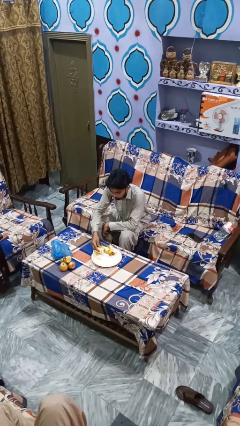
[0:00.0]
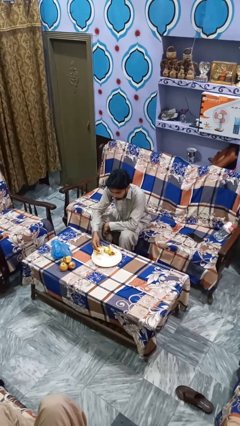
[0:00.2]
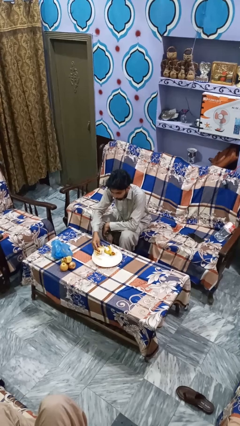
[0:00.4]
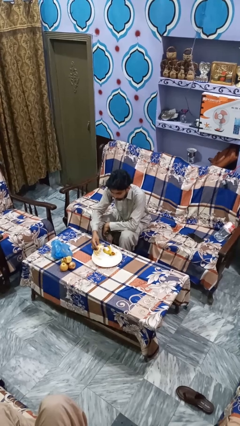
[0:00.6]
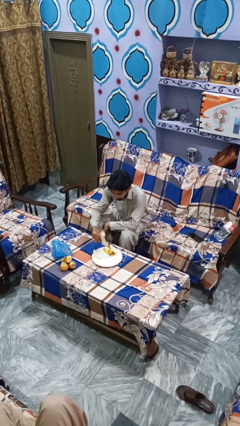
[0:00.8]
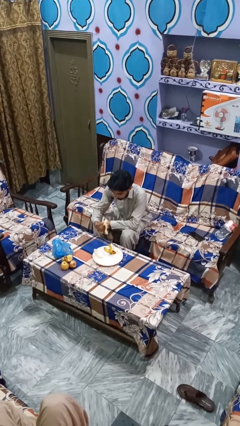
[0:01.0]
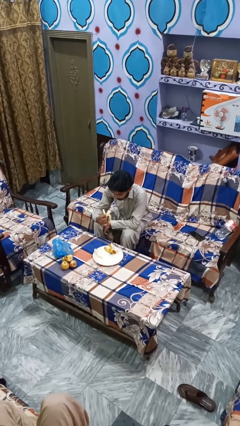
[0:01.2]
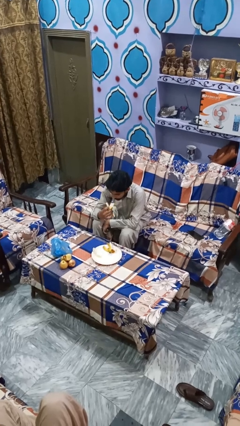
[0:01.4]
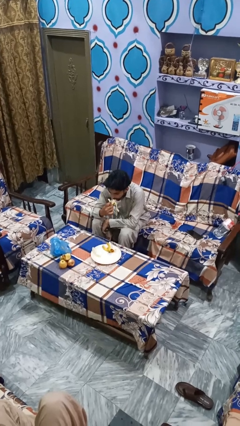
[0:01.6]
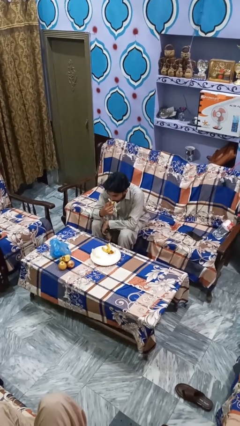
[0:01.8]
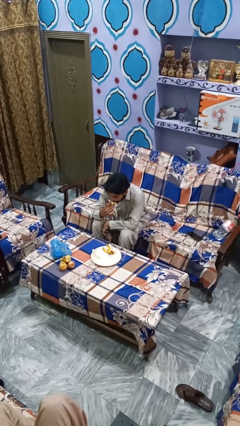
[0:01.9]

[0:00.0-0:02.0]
person eats banana

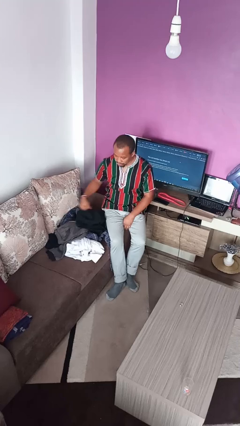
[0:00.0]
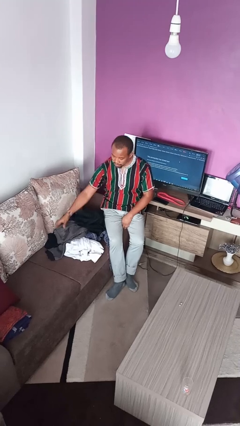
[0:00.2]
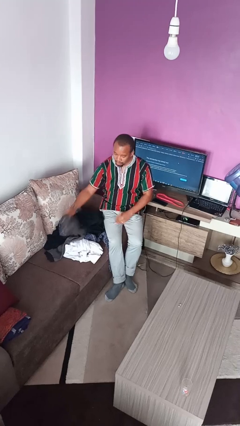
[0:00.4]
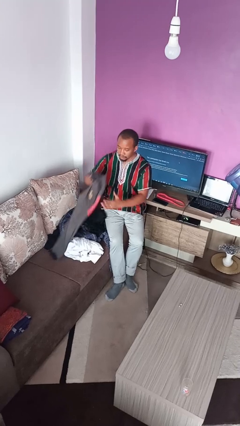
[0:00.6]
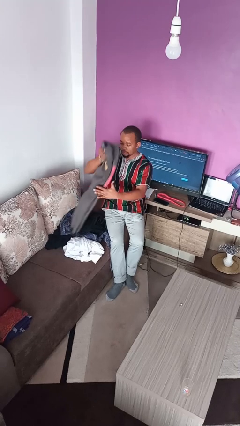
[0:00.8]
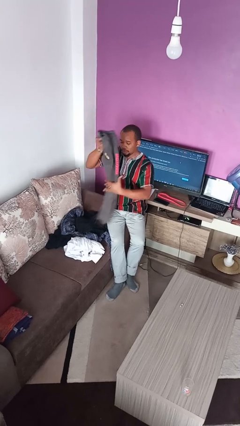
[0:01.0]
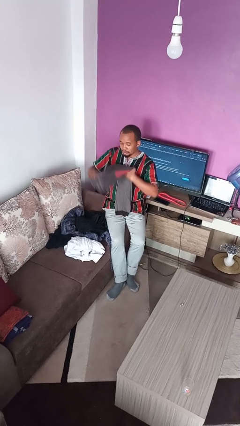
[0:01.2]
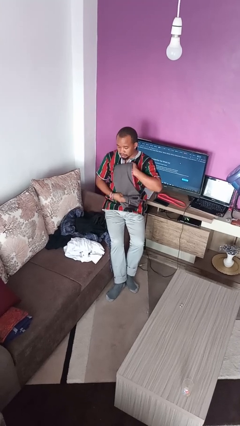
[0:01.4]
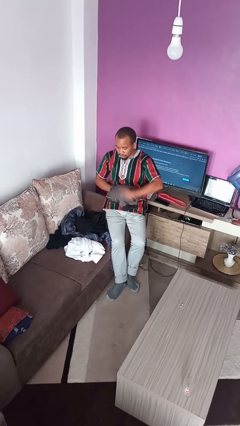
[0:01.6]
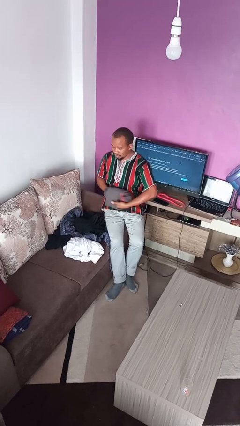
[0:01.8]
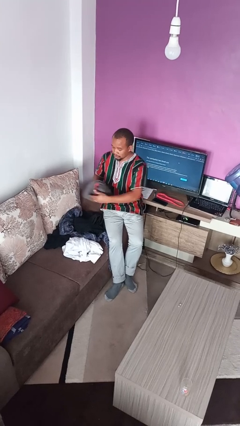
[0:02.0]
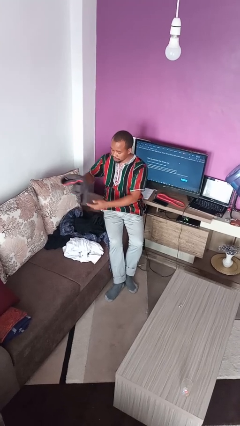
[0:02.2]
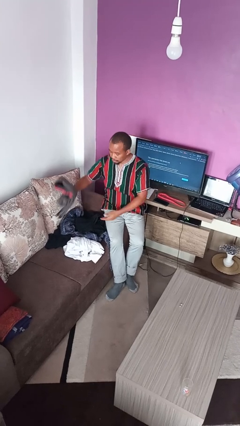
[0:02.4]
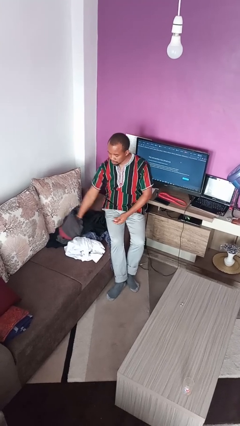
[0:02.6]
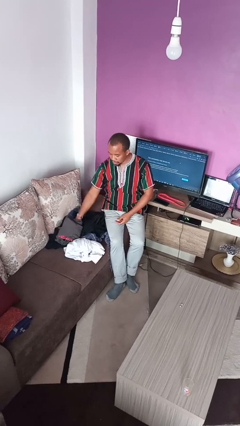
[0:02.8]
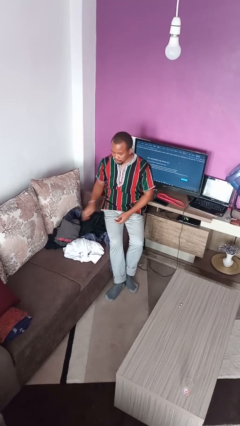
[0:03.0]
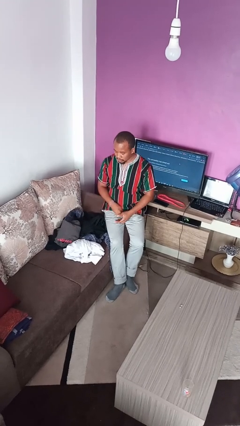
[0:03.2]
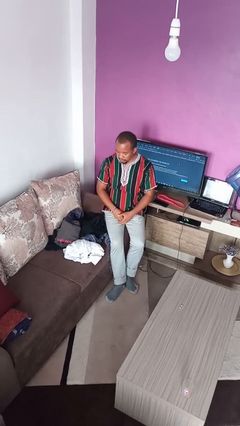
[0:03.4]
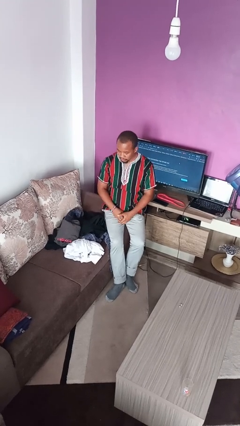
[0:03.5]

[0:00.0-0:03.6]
person folds pants

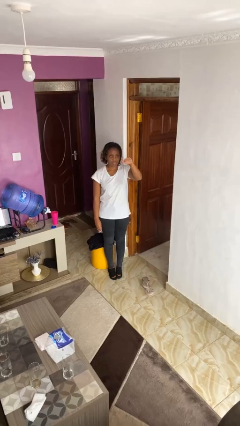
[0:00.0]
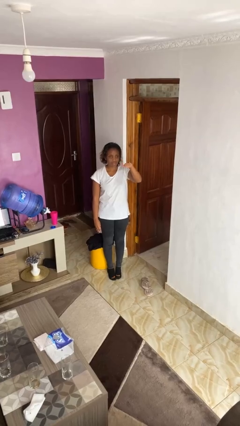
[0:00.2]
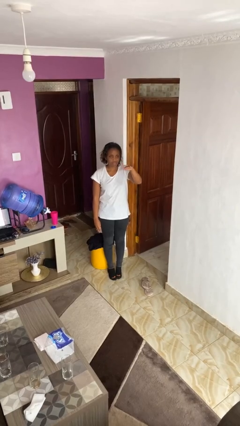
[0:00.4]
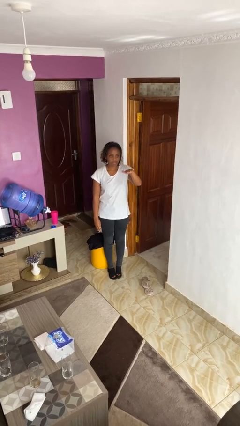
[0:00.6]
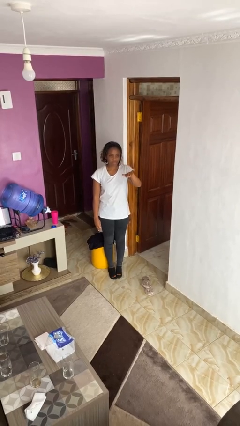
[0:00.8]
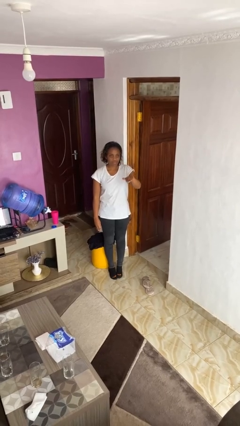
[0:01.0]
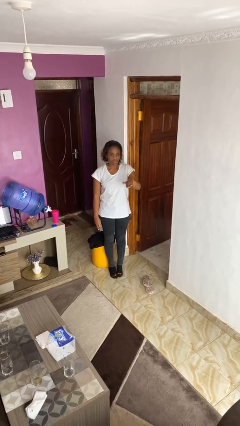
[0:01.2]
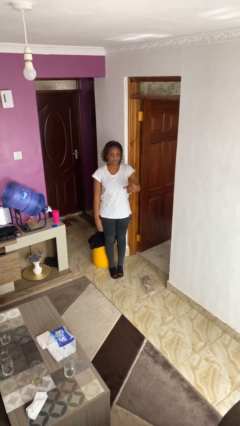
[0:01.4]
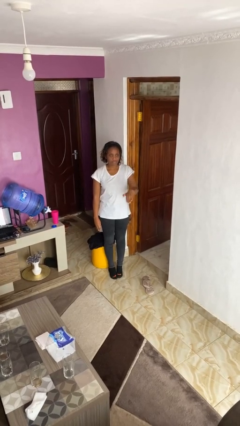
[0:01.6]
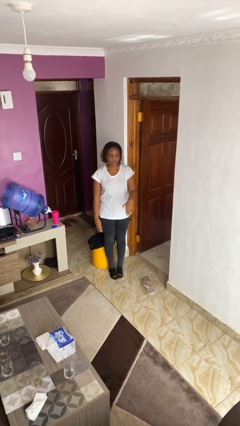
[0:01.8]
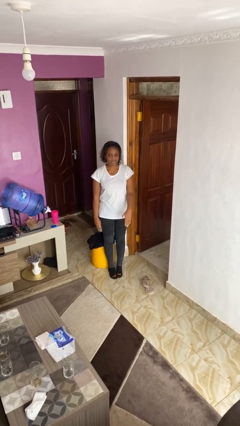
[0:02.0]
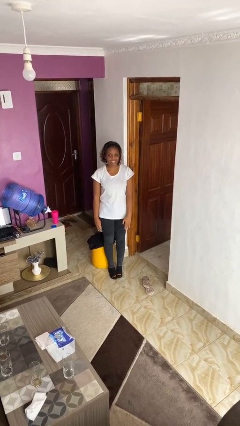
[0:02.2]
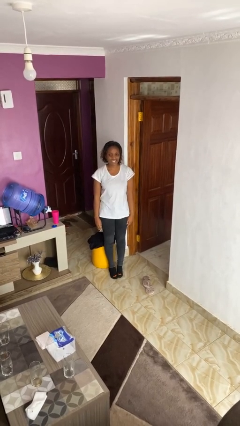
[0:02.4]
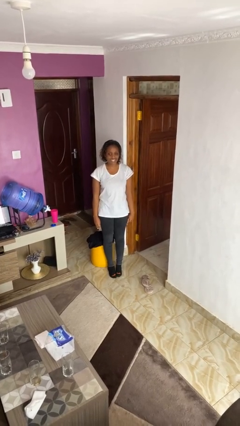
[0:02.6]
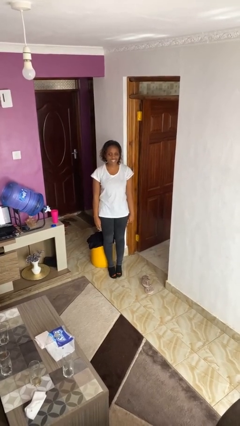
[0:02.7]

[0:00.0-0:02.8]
person gestures swipe down

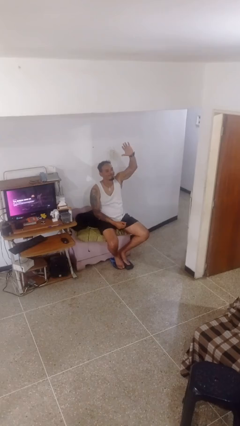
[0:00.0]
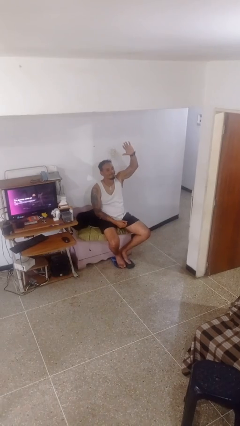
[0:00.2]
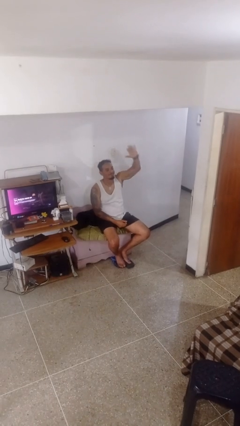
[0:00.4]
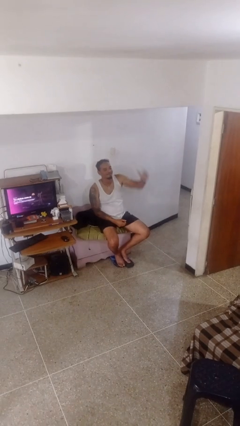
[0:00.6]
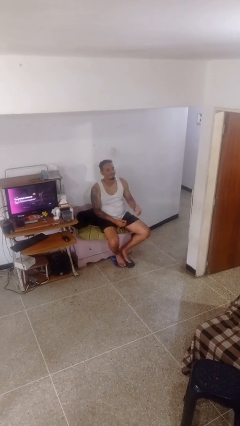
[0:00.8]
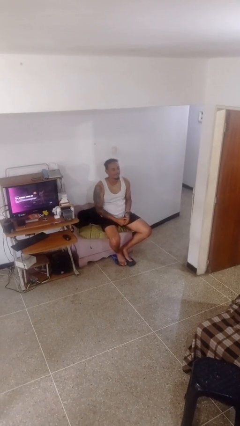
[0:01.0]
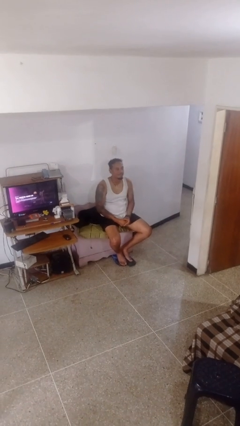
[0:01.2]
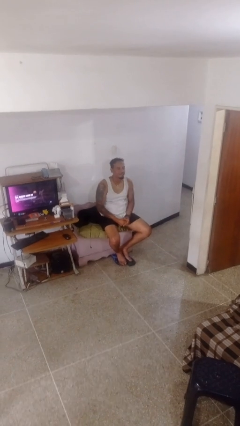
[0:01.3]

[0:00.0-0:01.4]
person gestures lower hand

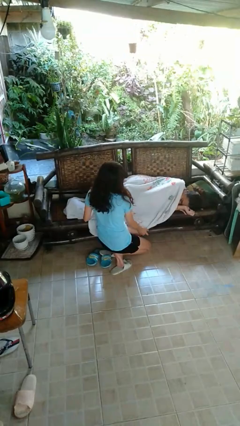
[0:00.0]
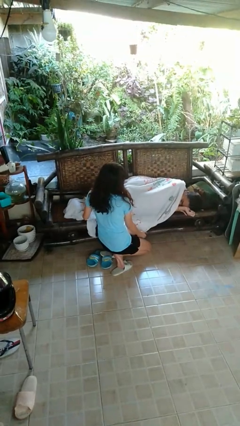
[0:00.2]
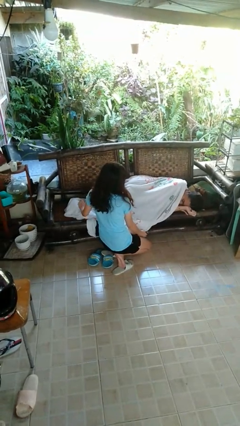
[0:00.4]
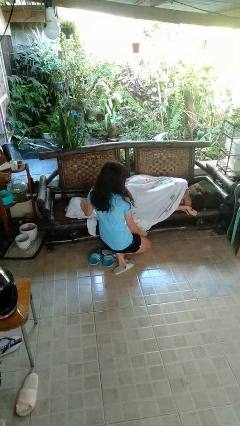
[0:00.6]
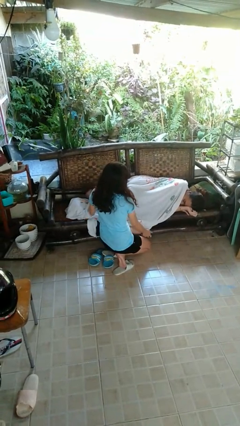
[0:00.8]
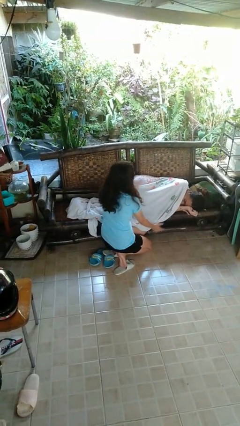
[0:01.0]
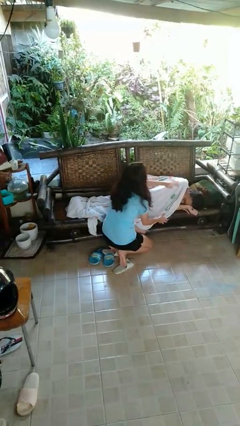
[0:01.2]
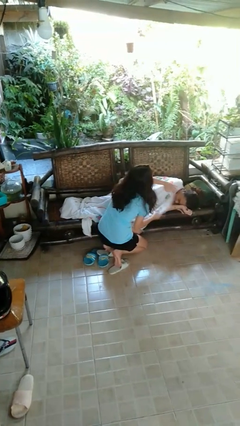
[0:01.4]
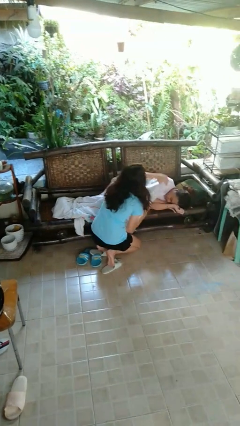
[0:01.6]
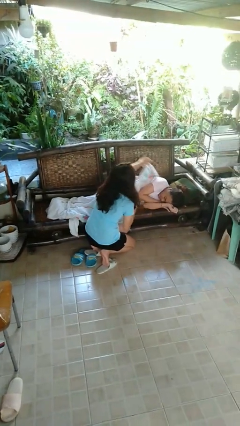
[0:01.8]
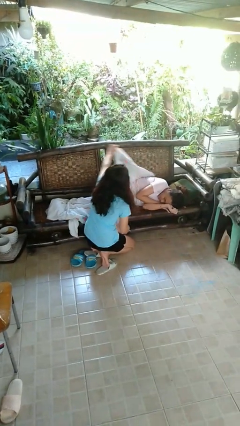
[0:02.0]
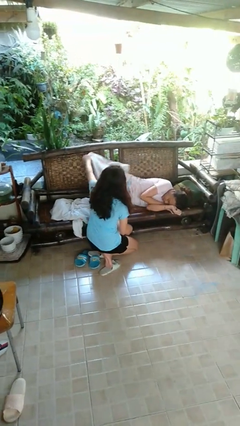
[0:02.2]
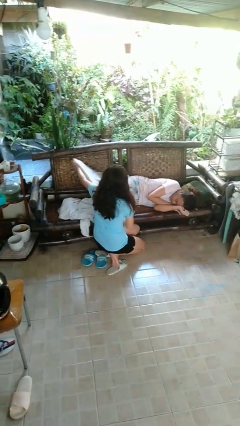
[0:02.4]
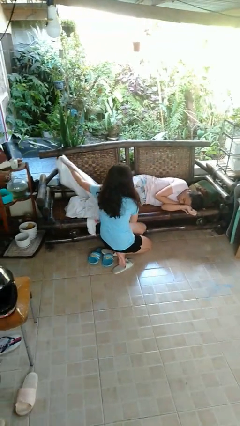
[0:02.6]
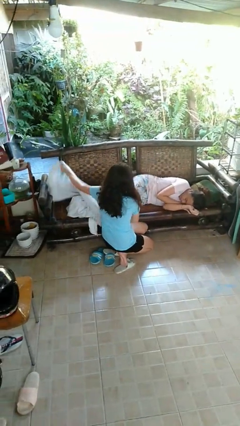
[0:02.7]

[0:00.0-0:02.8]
person uncovers friend with blanket

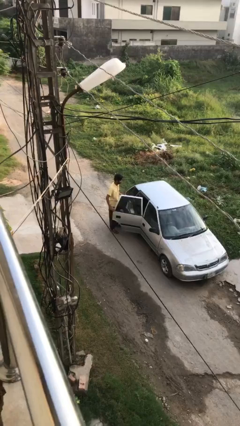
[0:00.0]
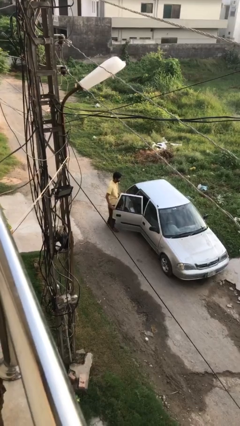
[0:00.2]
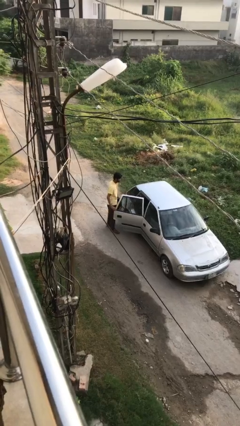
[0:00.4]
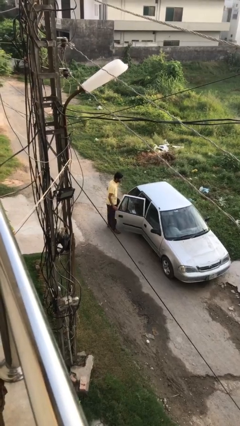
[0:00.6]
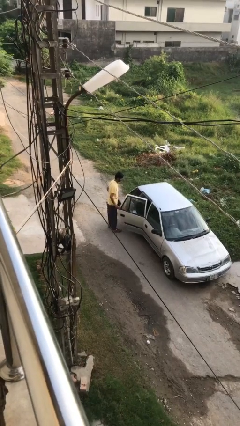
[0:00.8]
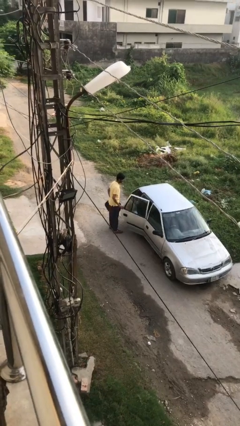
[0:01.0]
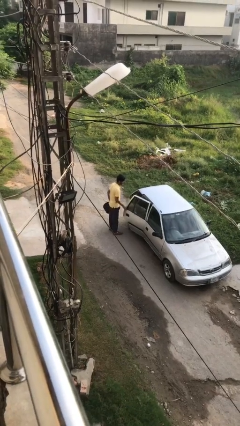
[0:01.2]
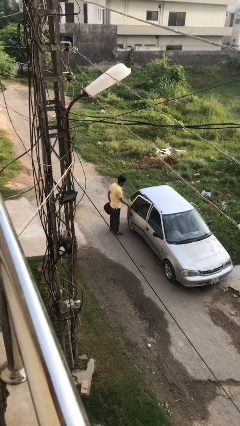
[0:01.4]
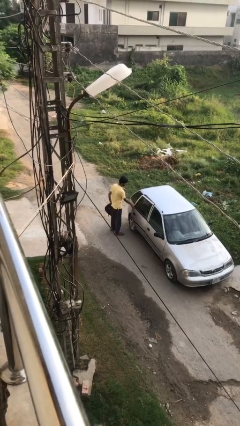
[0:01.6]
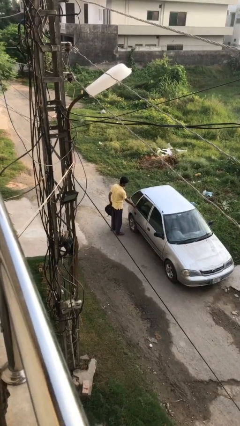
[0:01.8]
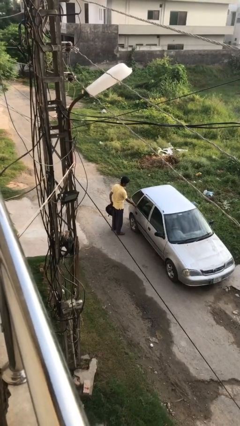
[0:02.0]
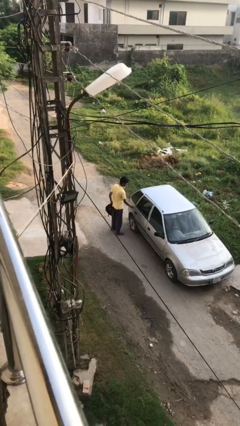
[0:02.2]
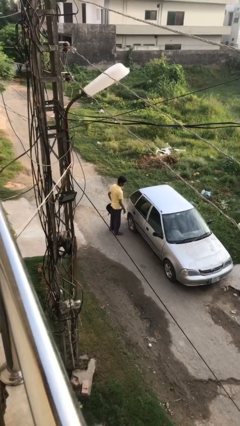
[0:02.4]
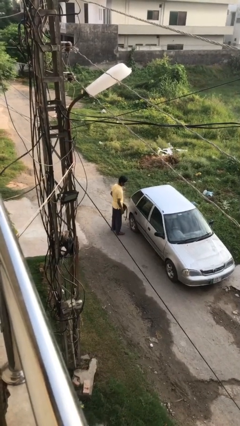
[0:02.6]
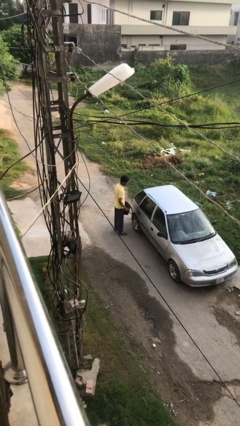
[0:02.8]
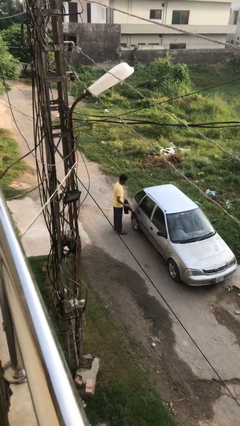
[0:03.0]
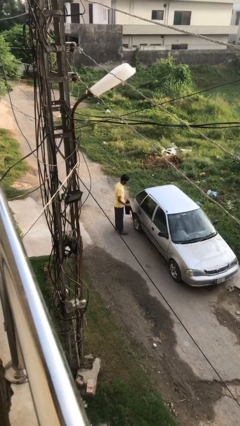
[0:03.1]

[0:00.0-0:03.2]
person closes car door

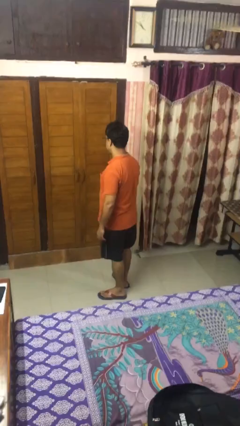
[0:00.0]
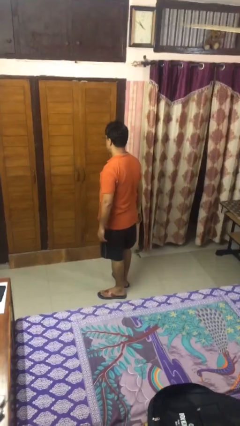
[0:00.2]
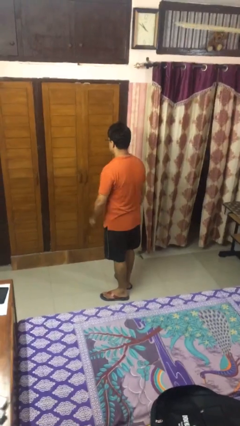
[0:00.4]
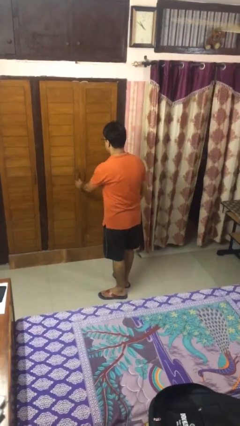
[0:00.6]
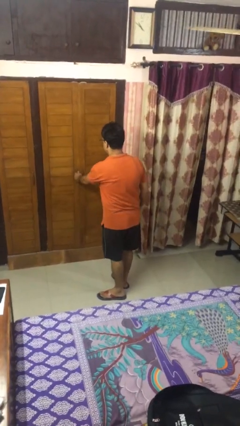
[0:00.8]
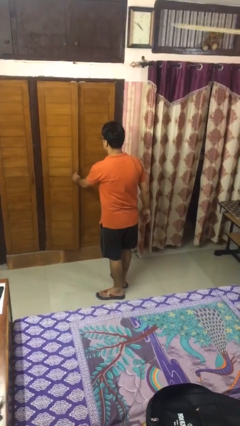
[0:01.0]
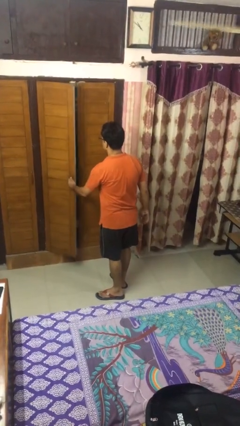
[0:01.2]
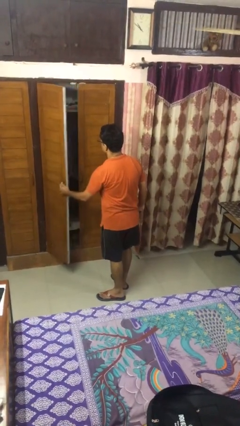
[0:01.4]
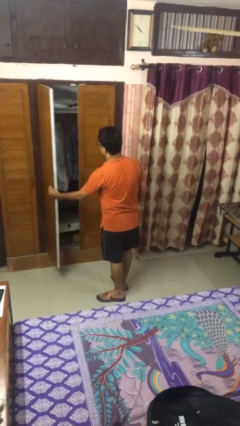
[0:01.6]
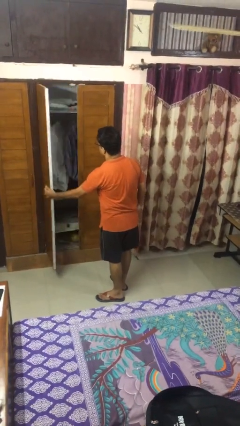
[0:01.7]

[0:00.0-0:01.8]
person opens closet door
